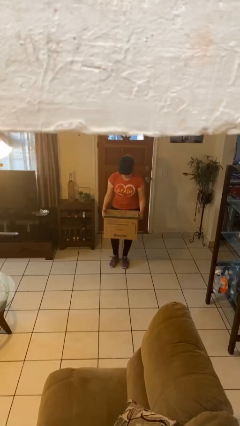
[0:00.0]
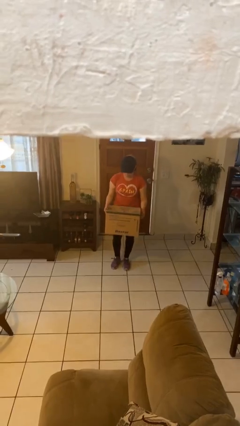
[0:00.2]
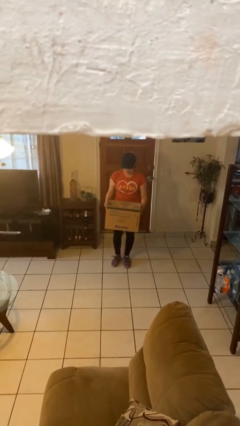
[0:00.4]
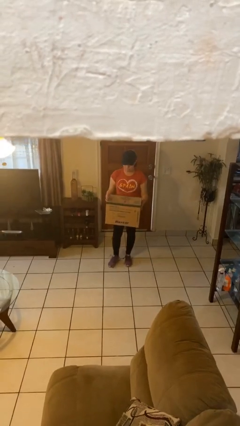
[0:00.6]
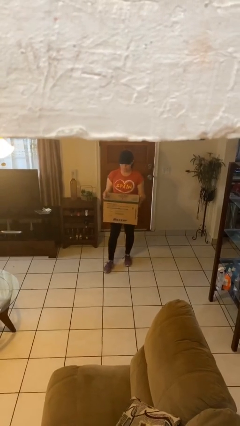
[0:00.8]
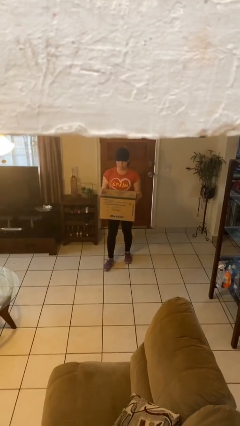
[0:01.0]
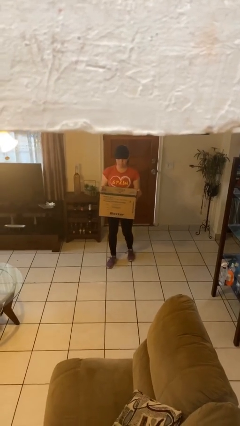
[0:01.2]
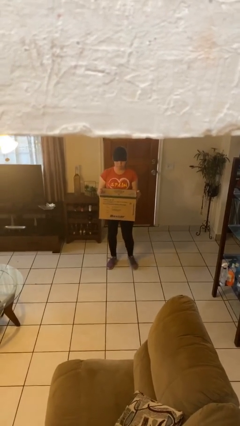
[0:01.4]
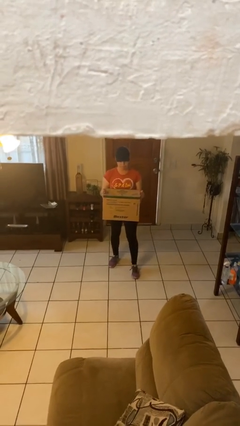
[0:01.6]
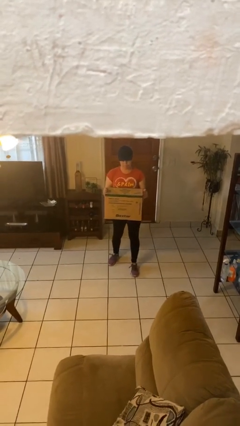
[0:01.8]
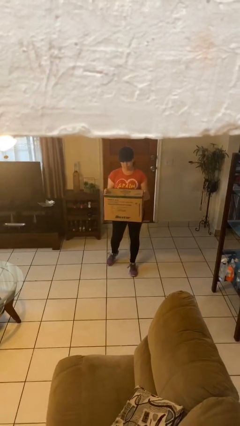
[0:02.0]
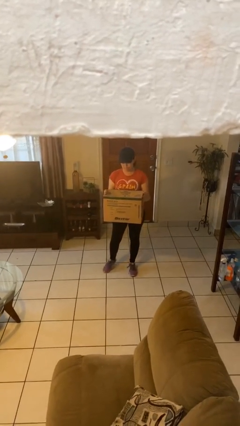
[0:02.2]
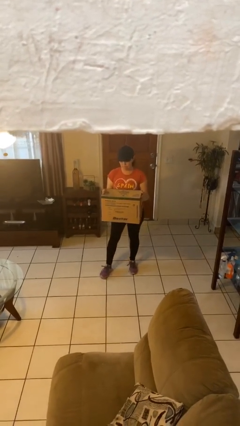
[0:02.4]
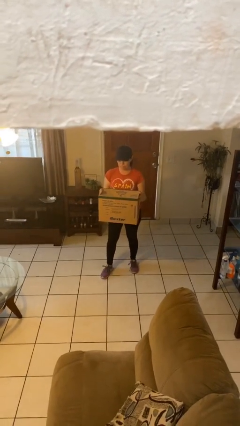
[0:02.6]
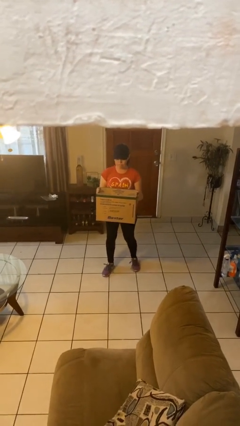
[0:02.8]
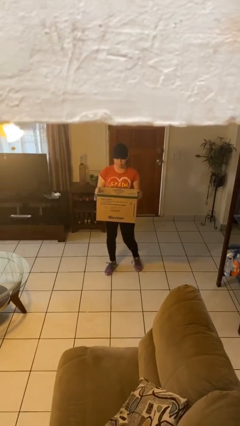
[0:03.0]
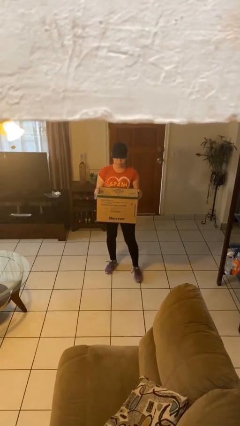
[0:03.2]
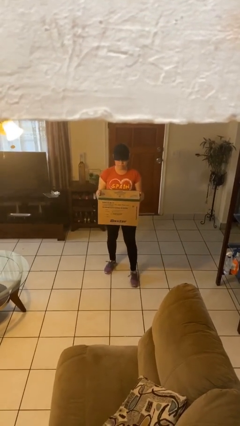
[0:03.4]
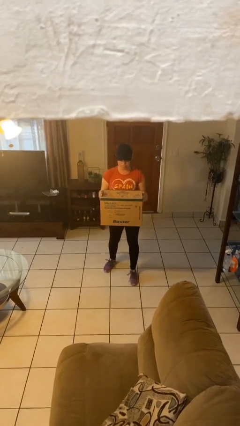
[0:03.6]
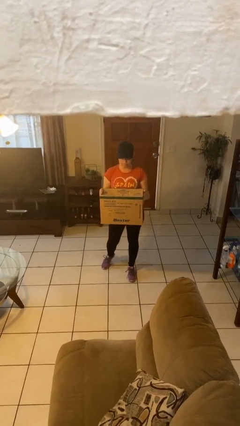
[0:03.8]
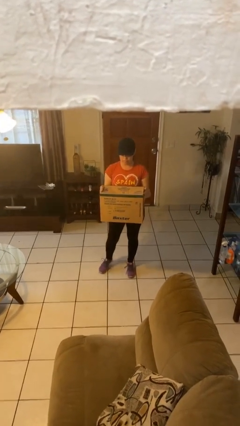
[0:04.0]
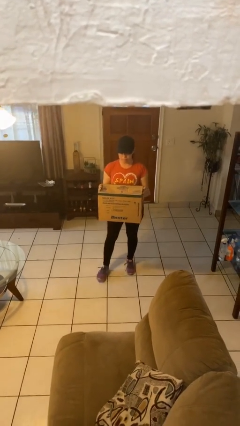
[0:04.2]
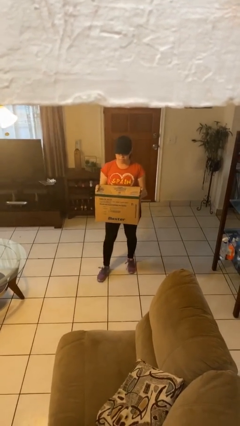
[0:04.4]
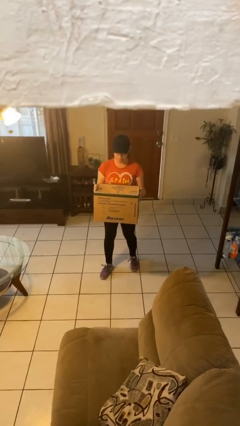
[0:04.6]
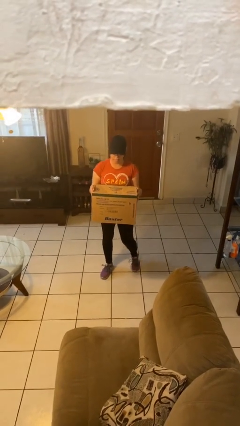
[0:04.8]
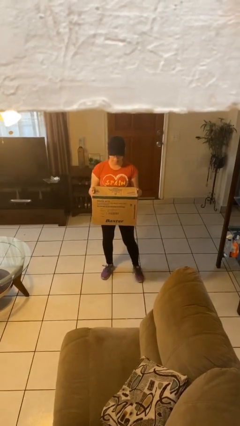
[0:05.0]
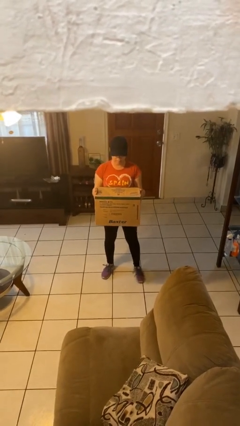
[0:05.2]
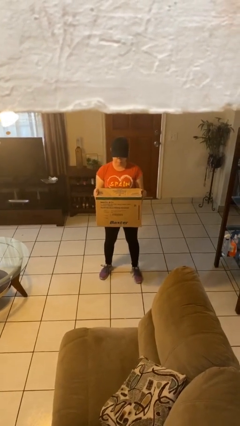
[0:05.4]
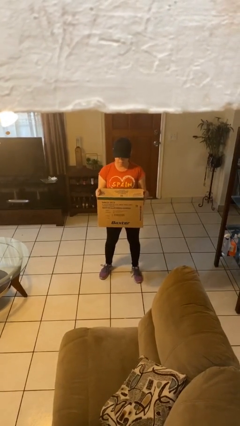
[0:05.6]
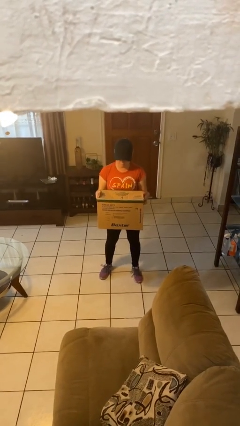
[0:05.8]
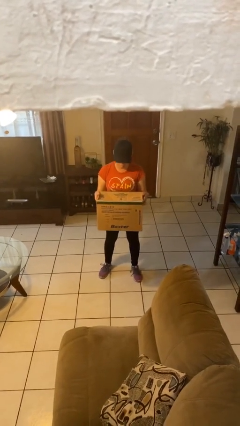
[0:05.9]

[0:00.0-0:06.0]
person carries heavy object

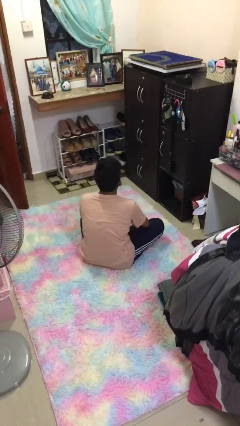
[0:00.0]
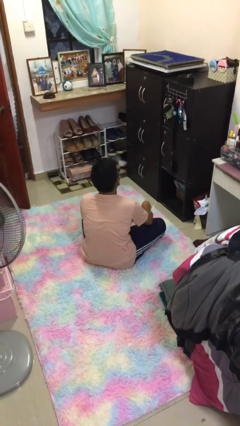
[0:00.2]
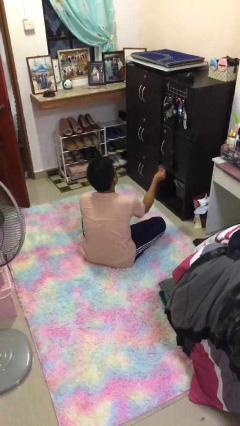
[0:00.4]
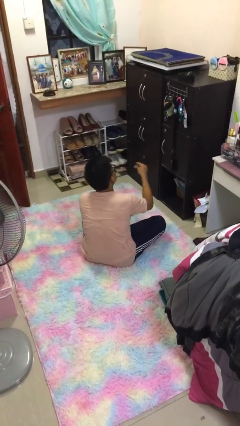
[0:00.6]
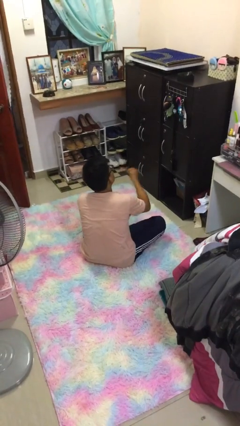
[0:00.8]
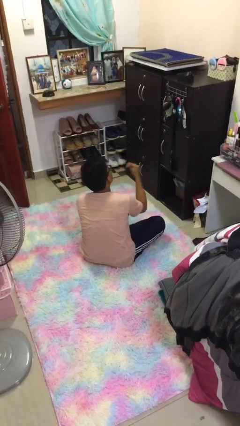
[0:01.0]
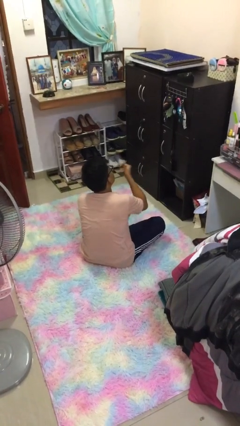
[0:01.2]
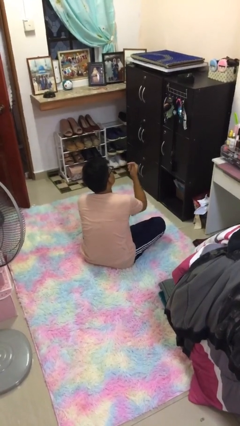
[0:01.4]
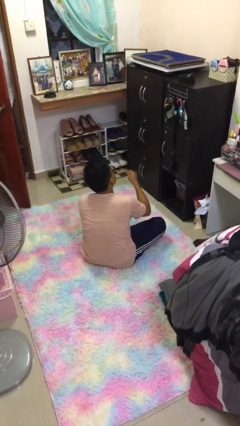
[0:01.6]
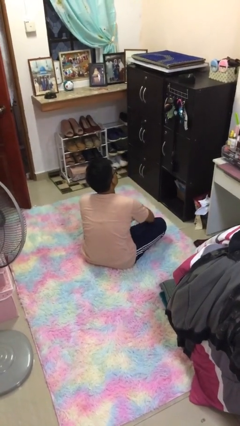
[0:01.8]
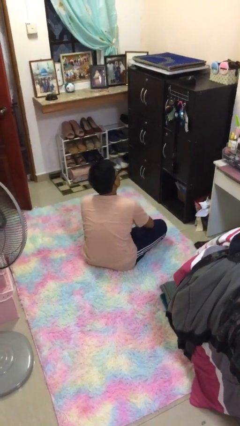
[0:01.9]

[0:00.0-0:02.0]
person snaps fingers

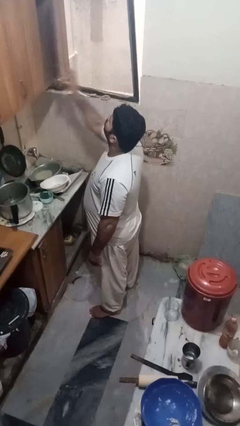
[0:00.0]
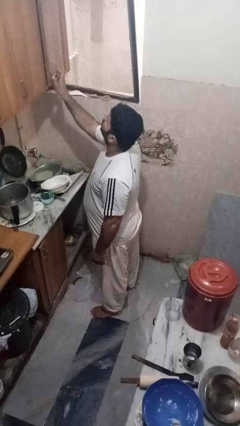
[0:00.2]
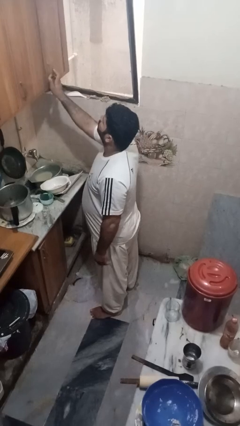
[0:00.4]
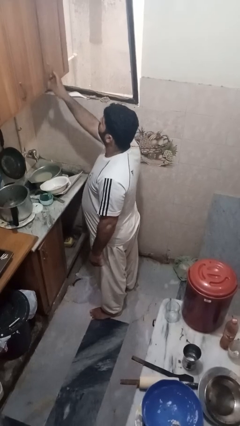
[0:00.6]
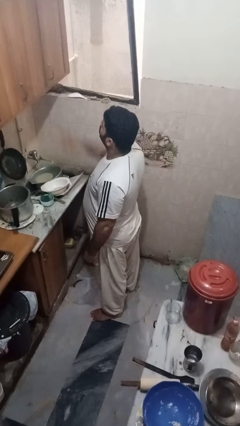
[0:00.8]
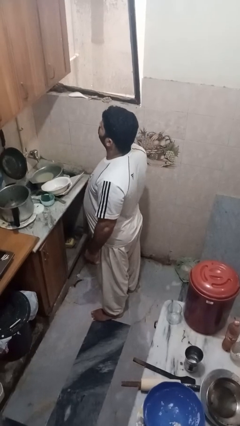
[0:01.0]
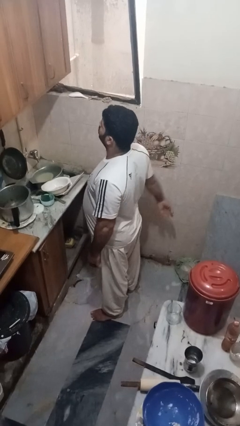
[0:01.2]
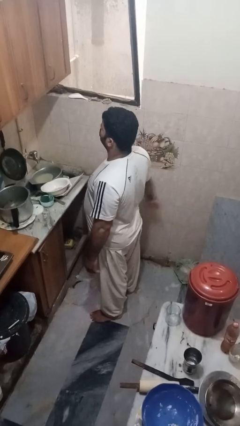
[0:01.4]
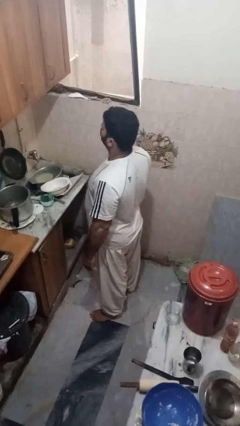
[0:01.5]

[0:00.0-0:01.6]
person closes cabinet

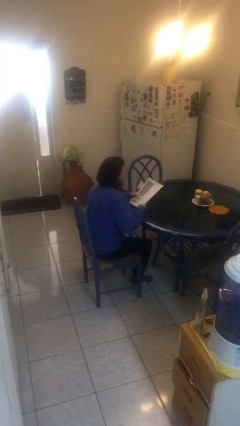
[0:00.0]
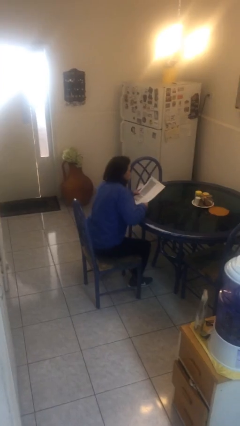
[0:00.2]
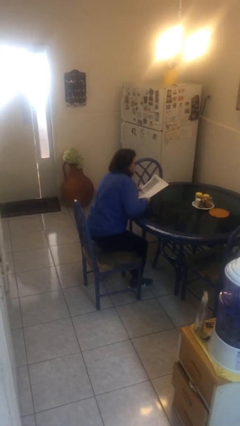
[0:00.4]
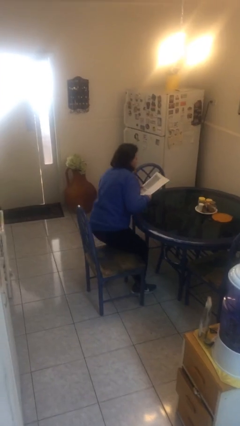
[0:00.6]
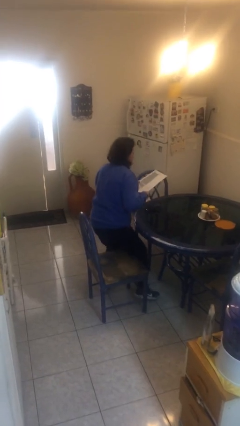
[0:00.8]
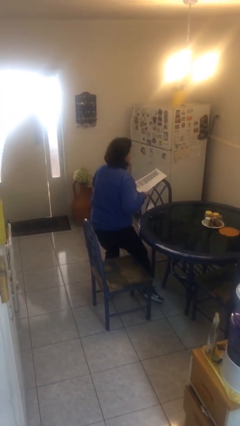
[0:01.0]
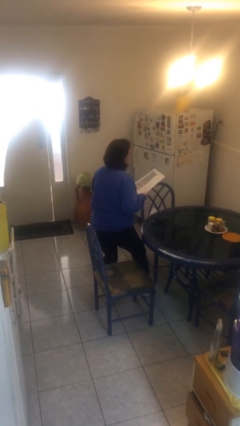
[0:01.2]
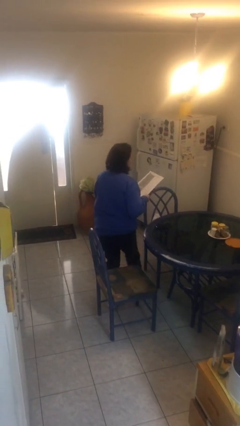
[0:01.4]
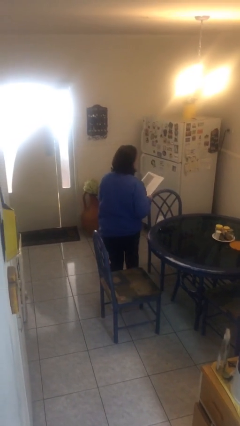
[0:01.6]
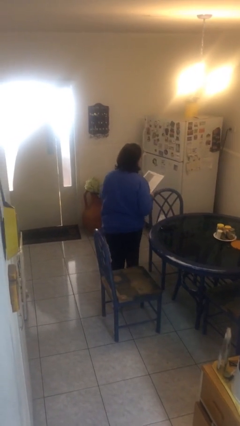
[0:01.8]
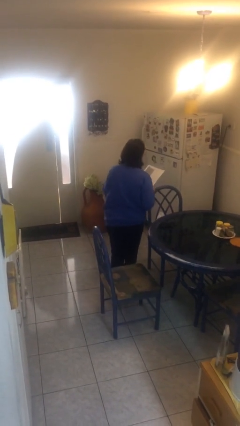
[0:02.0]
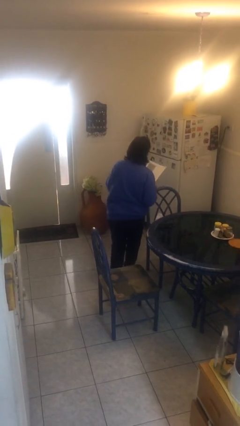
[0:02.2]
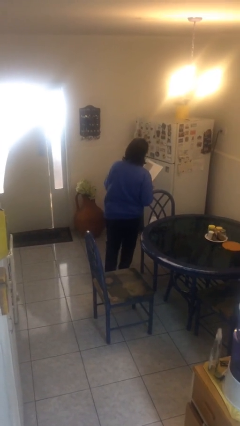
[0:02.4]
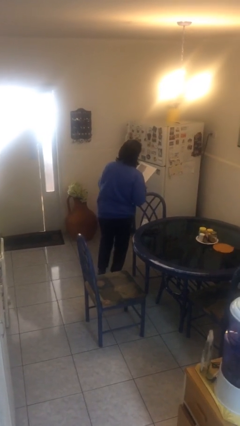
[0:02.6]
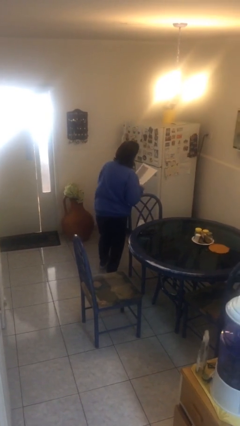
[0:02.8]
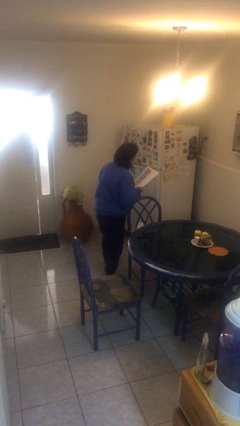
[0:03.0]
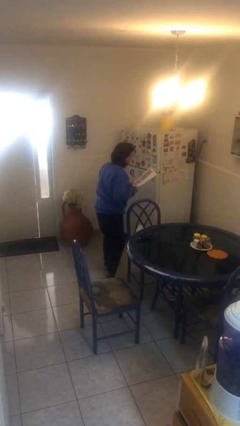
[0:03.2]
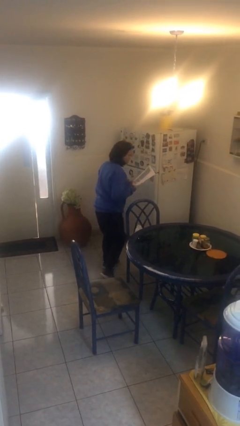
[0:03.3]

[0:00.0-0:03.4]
person stands up

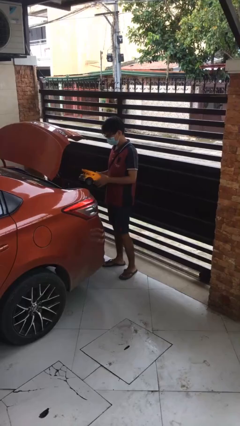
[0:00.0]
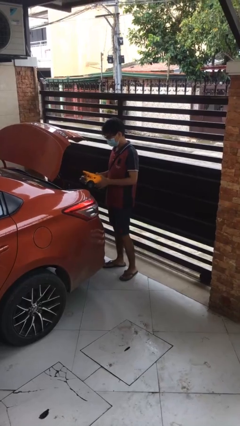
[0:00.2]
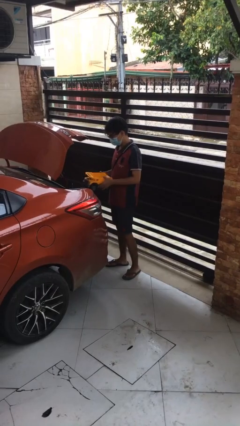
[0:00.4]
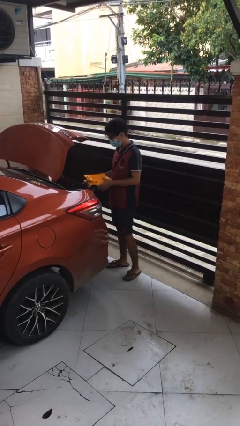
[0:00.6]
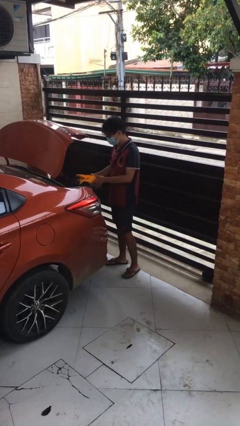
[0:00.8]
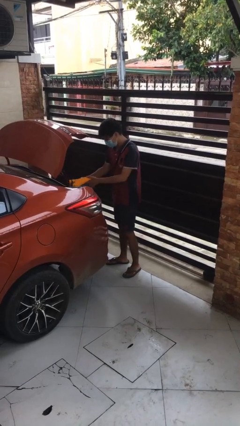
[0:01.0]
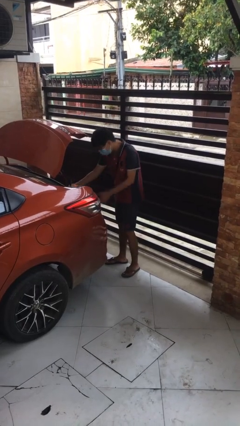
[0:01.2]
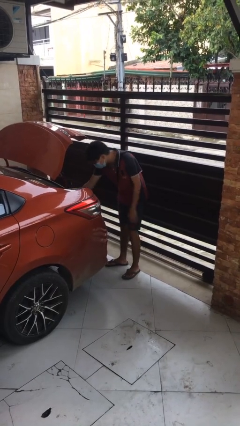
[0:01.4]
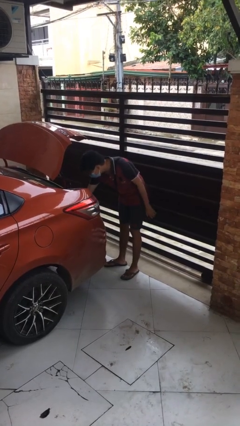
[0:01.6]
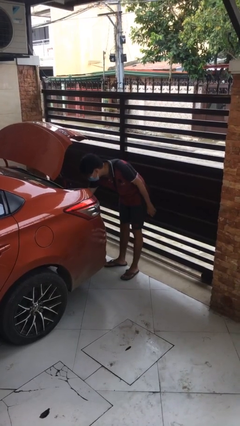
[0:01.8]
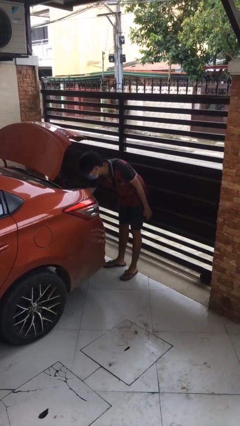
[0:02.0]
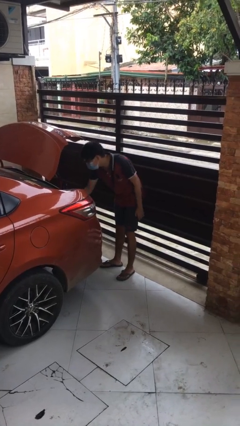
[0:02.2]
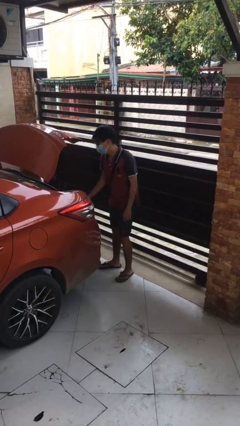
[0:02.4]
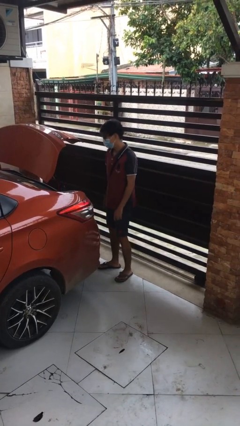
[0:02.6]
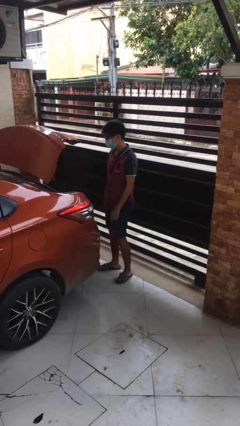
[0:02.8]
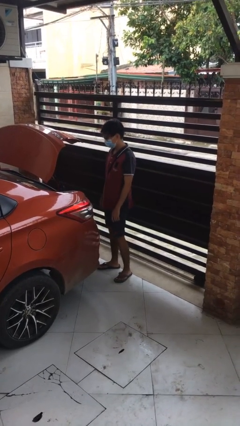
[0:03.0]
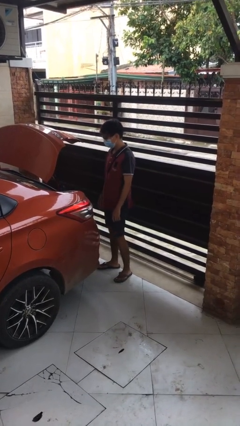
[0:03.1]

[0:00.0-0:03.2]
person loads car

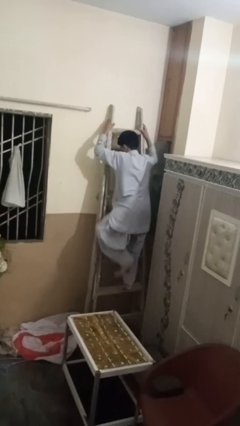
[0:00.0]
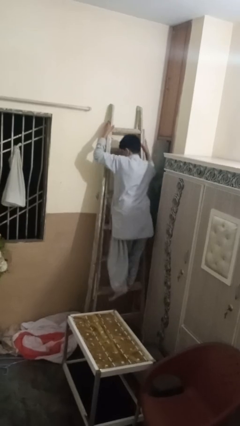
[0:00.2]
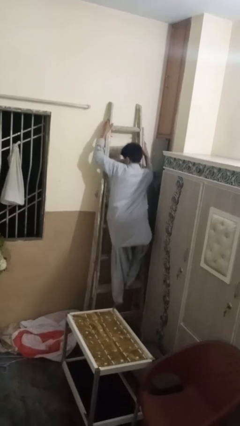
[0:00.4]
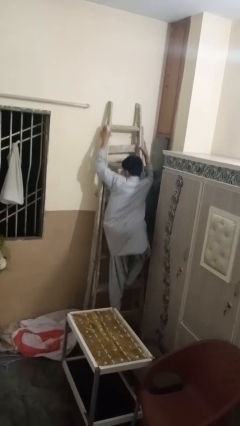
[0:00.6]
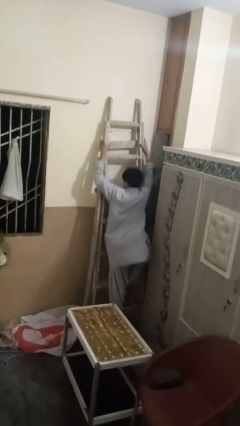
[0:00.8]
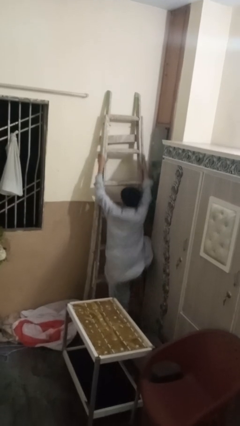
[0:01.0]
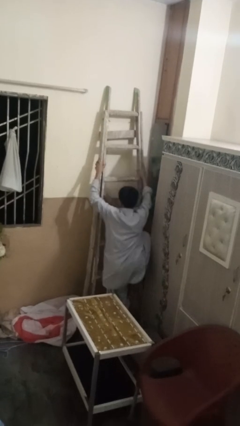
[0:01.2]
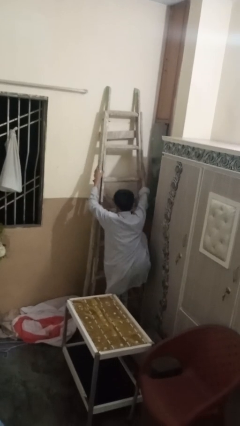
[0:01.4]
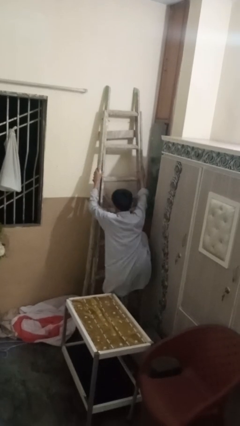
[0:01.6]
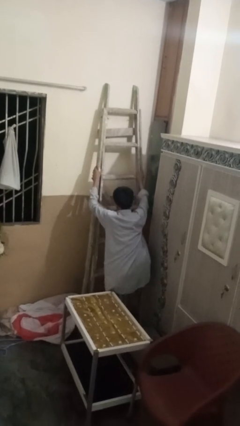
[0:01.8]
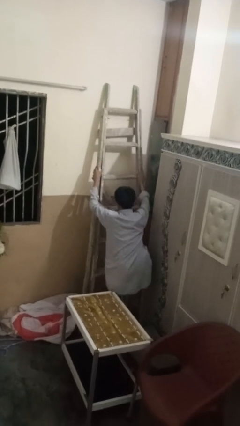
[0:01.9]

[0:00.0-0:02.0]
person climbs down ladder
